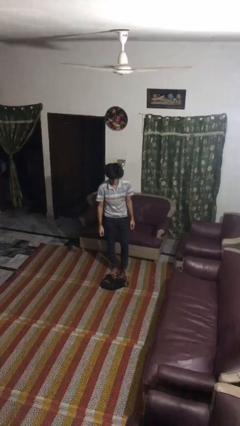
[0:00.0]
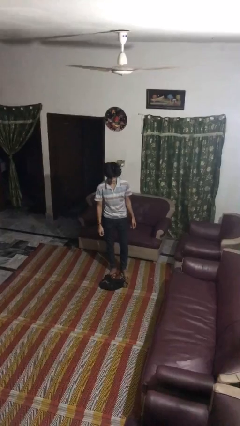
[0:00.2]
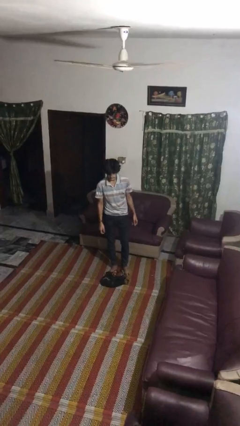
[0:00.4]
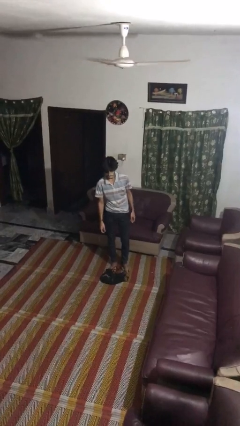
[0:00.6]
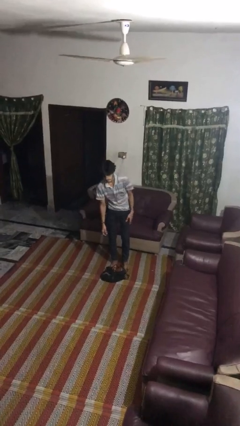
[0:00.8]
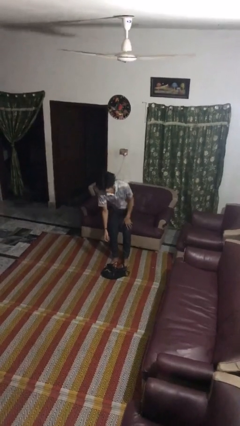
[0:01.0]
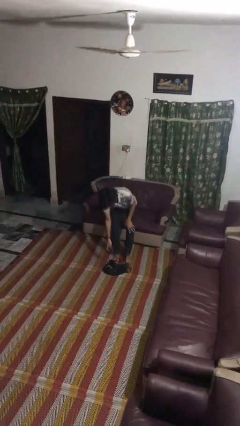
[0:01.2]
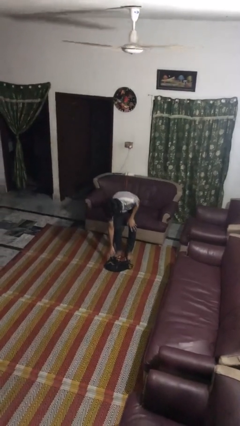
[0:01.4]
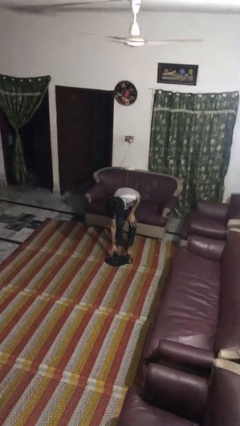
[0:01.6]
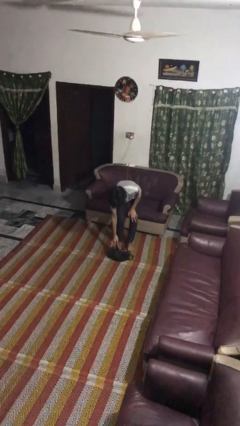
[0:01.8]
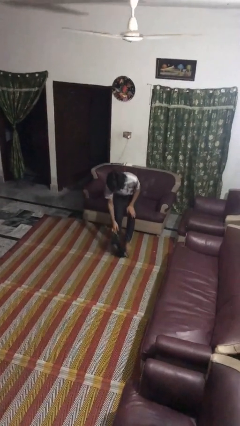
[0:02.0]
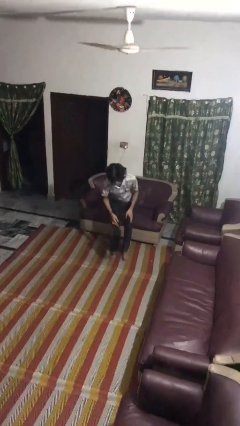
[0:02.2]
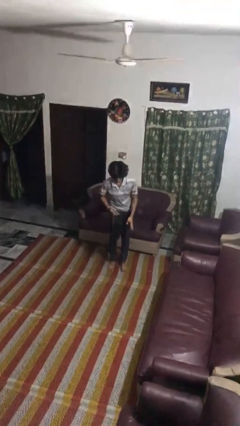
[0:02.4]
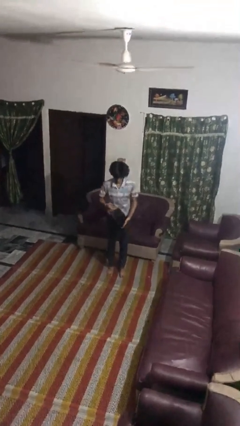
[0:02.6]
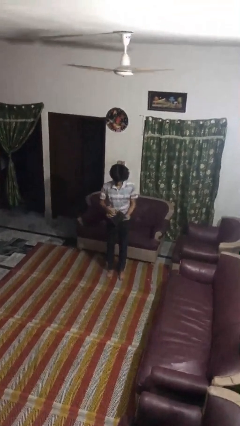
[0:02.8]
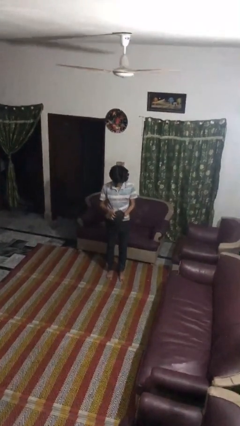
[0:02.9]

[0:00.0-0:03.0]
person picks up object from floor

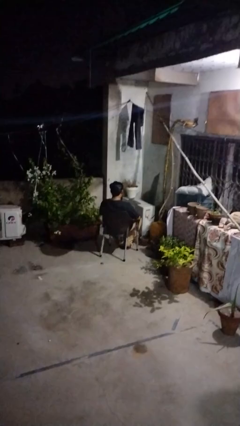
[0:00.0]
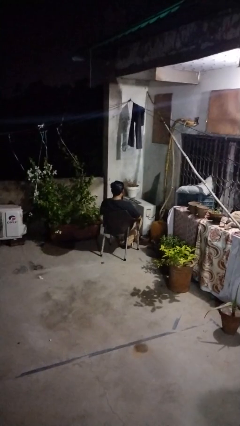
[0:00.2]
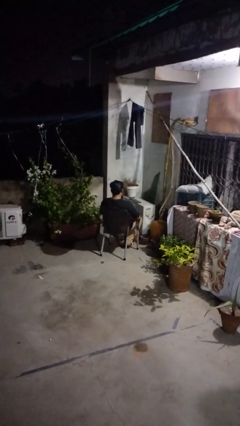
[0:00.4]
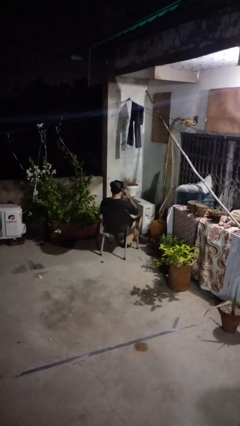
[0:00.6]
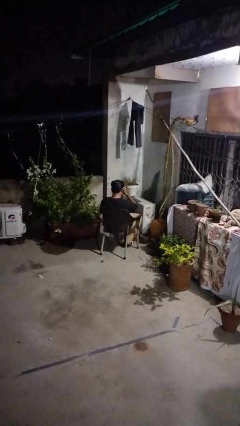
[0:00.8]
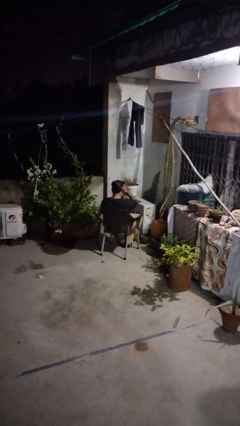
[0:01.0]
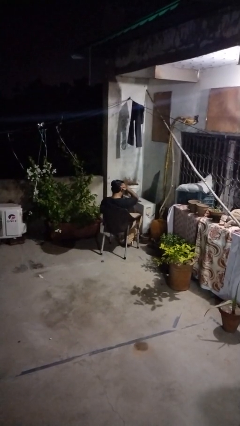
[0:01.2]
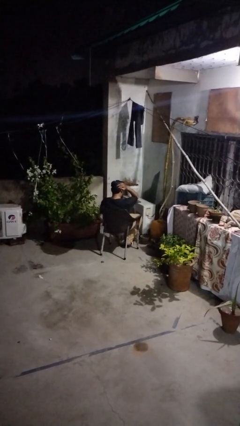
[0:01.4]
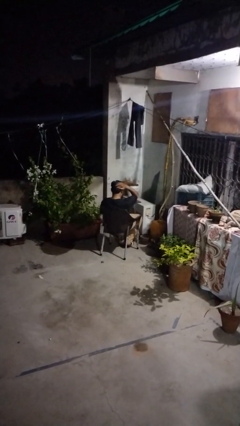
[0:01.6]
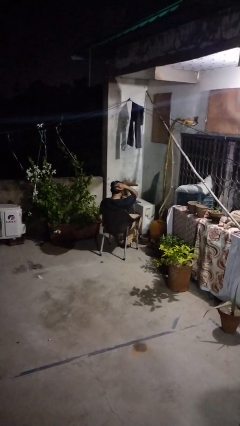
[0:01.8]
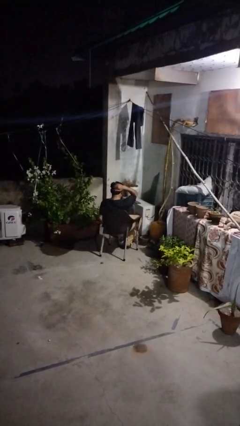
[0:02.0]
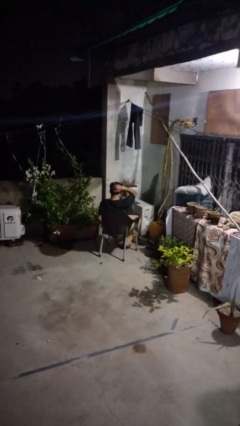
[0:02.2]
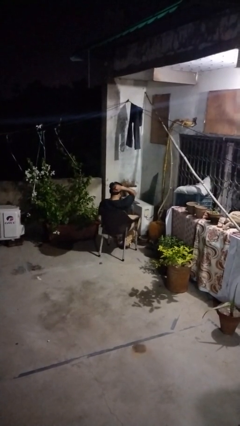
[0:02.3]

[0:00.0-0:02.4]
person strokes hair

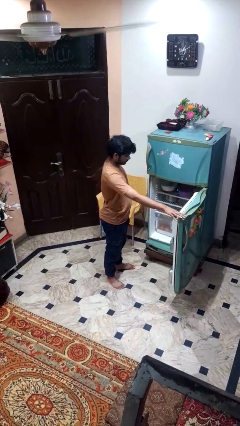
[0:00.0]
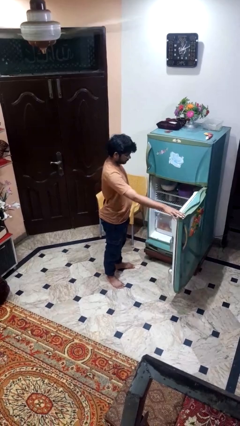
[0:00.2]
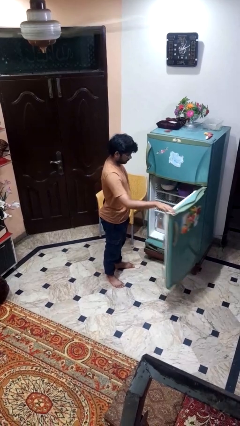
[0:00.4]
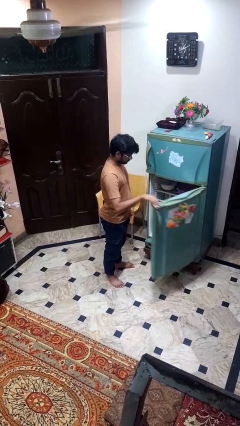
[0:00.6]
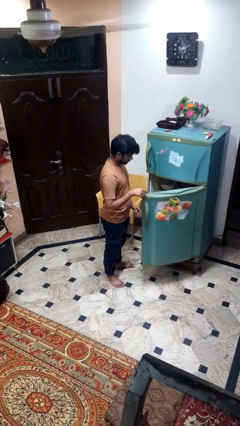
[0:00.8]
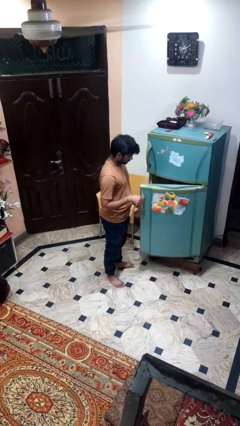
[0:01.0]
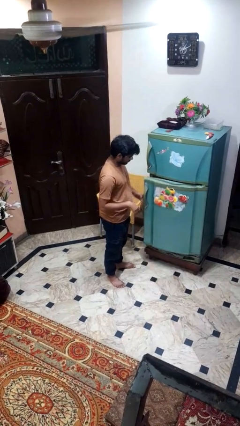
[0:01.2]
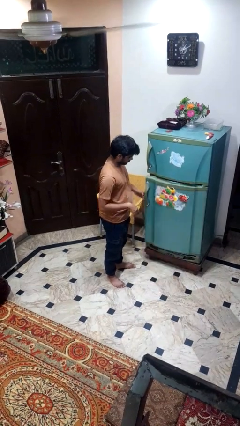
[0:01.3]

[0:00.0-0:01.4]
person closes refrigerator

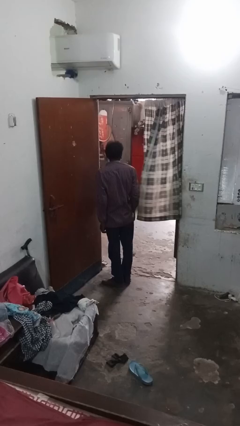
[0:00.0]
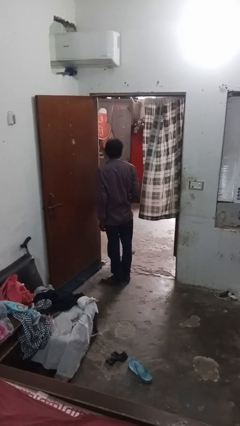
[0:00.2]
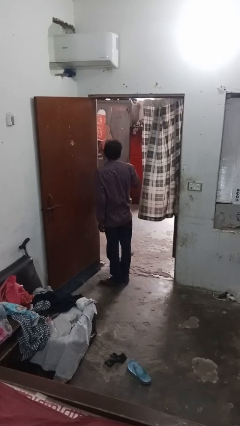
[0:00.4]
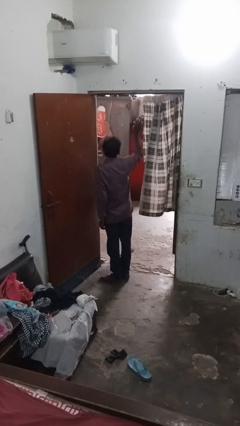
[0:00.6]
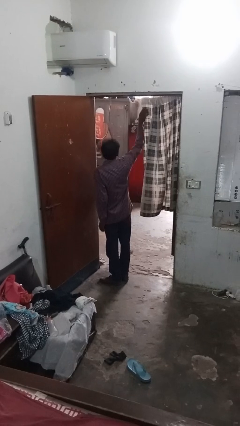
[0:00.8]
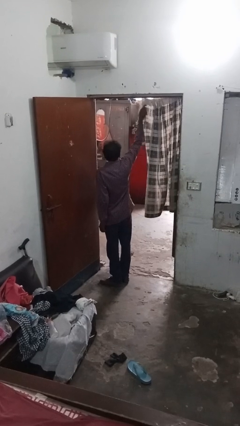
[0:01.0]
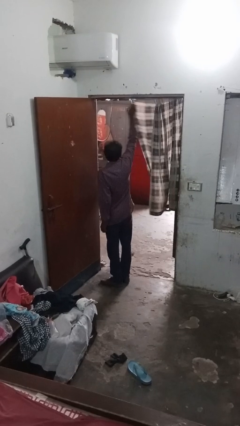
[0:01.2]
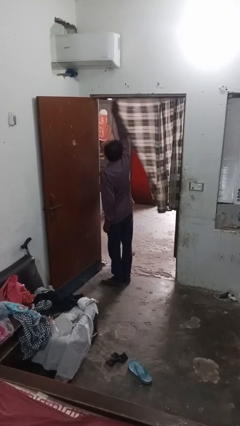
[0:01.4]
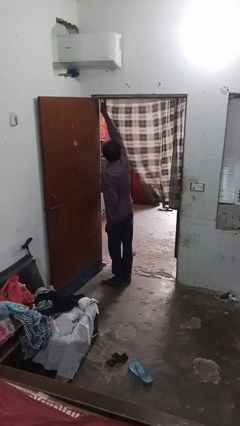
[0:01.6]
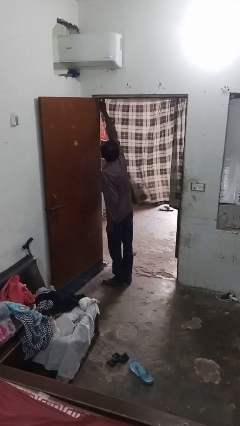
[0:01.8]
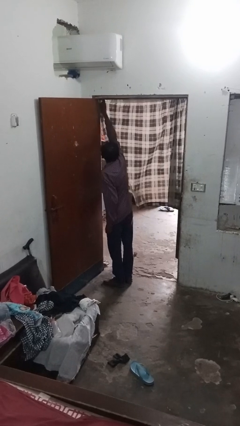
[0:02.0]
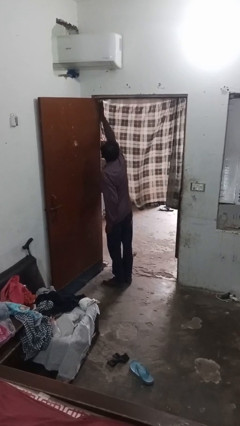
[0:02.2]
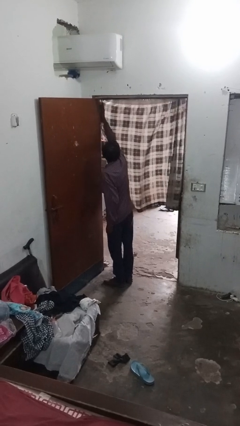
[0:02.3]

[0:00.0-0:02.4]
person closes curtains

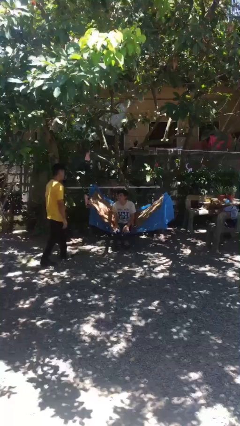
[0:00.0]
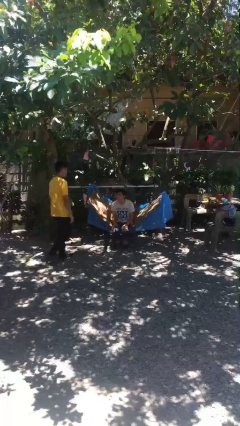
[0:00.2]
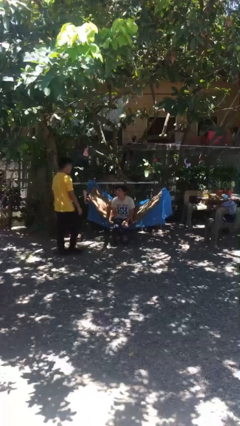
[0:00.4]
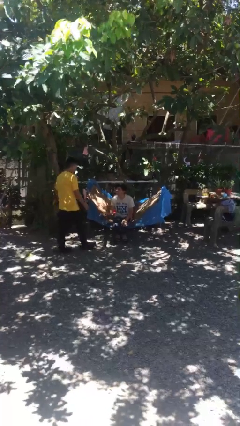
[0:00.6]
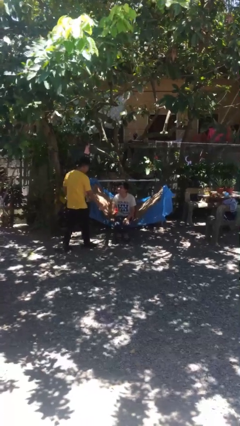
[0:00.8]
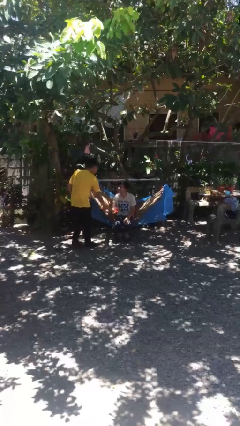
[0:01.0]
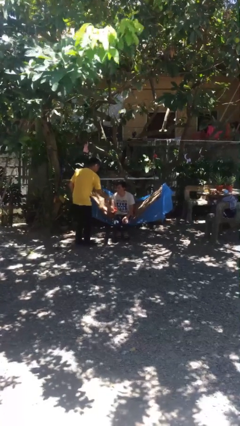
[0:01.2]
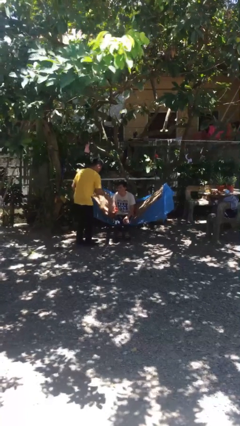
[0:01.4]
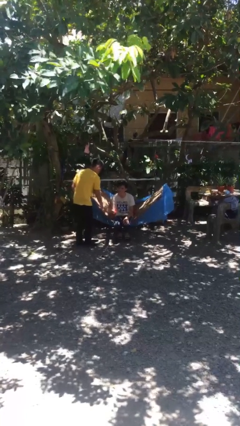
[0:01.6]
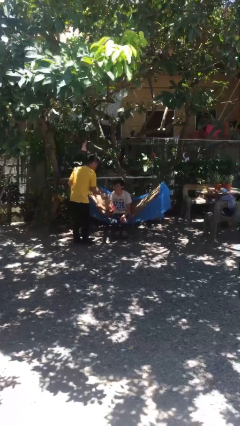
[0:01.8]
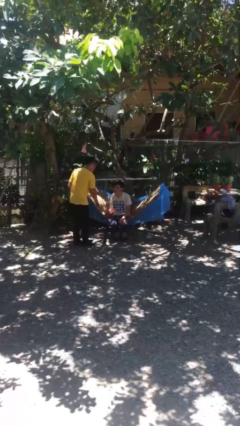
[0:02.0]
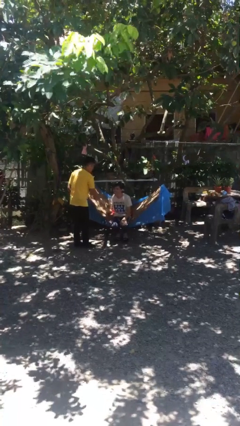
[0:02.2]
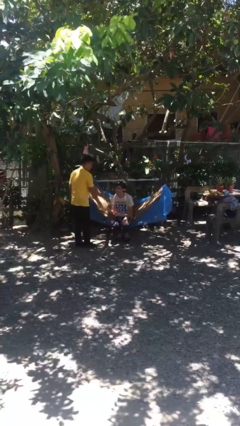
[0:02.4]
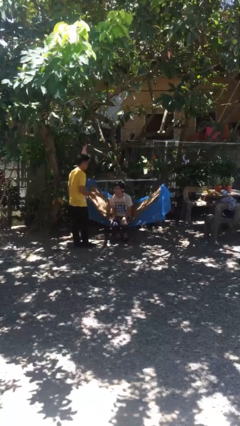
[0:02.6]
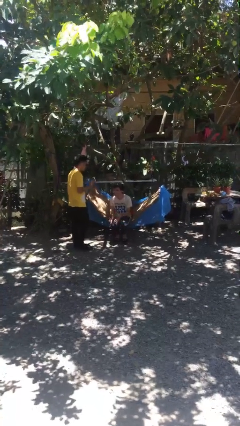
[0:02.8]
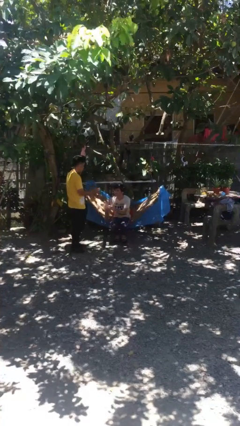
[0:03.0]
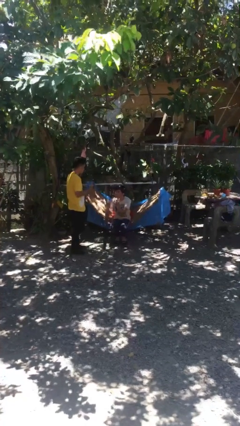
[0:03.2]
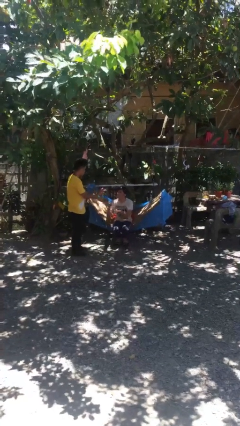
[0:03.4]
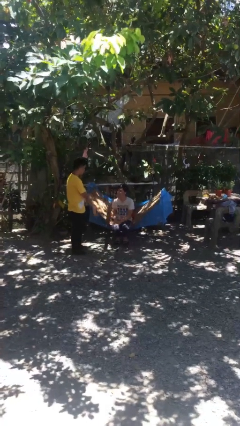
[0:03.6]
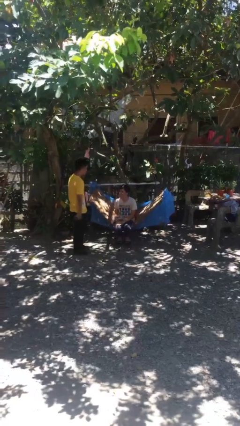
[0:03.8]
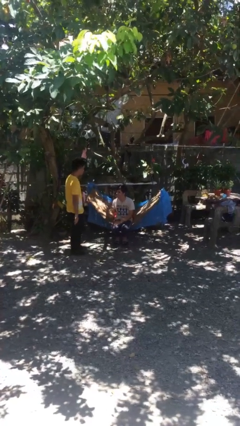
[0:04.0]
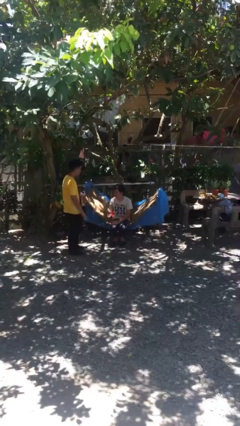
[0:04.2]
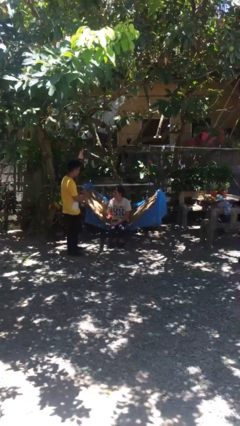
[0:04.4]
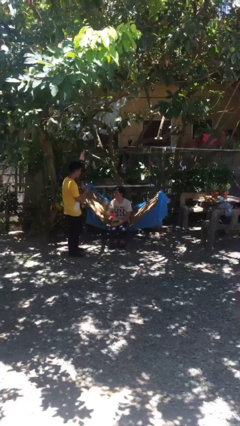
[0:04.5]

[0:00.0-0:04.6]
person shakes hand

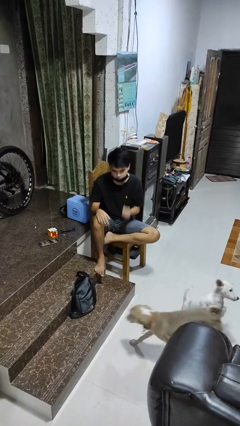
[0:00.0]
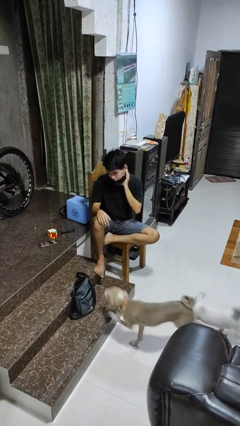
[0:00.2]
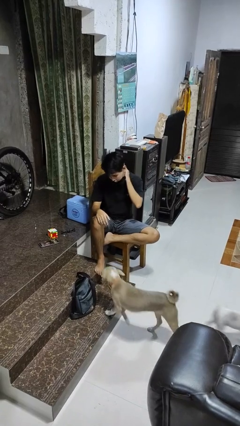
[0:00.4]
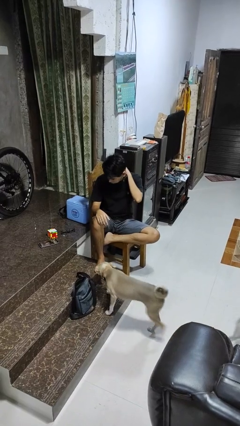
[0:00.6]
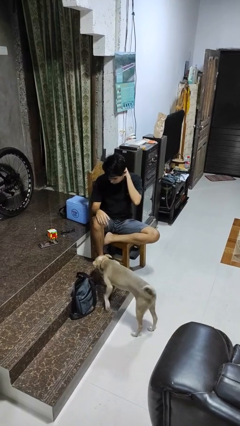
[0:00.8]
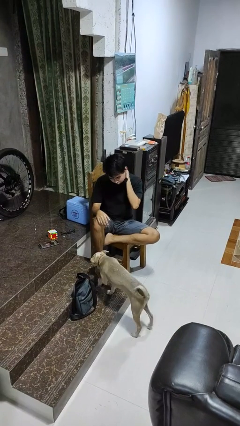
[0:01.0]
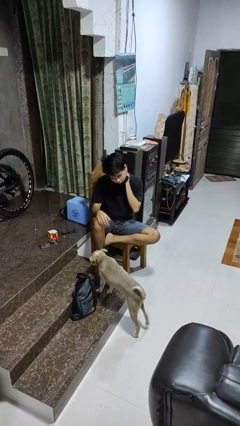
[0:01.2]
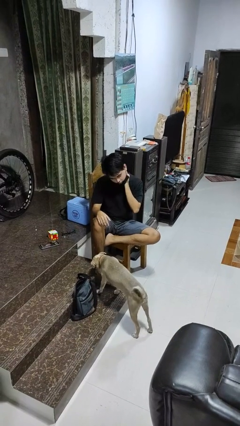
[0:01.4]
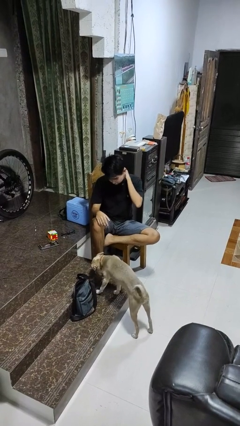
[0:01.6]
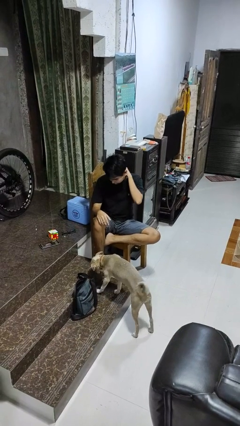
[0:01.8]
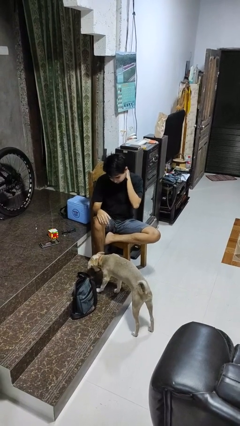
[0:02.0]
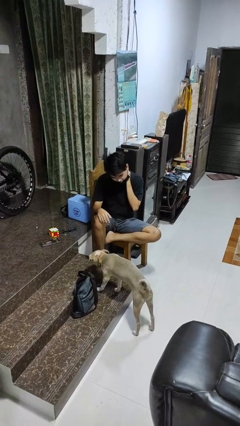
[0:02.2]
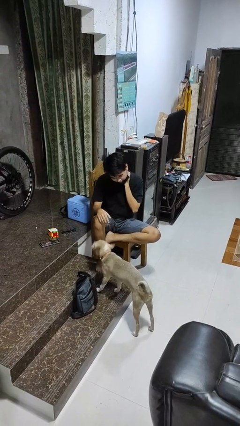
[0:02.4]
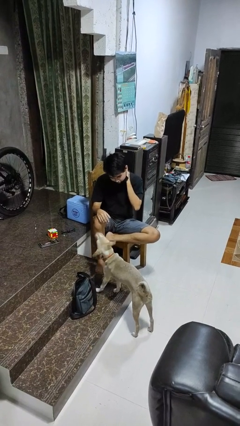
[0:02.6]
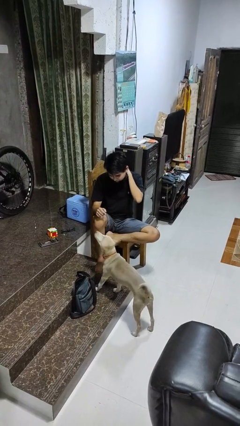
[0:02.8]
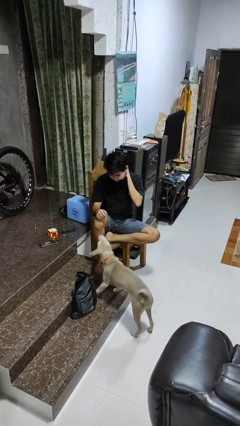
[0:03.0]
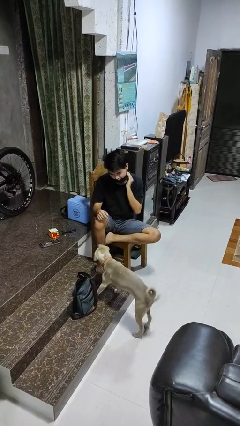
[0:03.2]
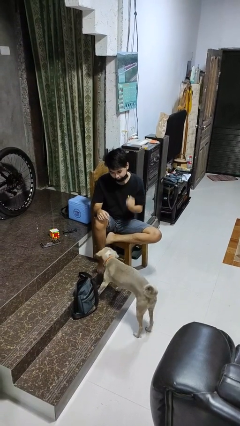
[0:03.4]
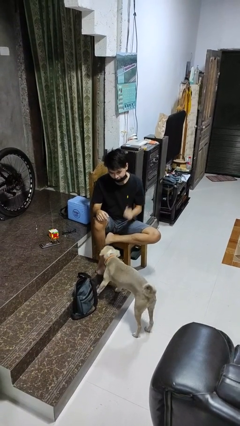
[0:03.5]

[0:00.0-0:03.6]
person rubs neck

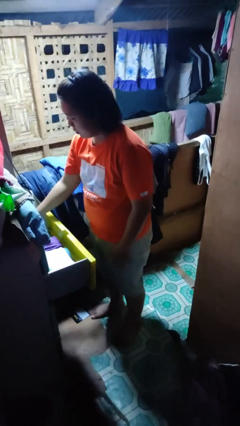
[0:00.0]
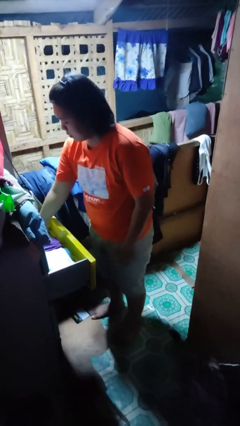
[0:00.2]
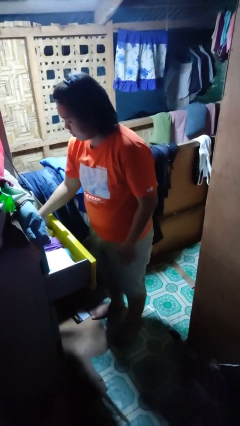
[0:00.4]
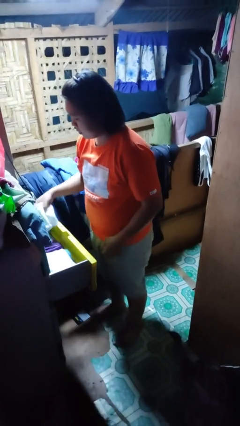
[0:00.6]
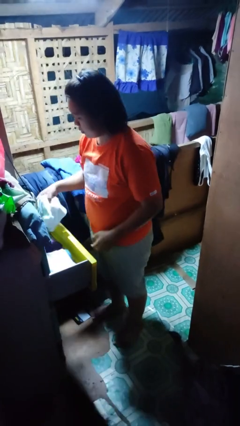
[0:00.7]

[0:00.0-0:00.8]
person takes clothes from dresser
